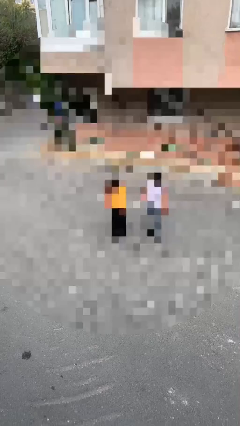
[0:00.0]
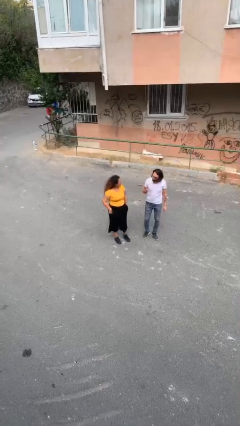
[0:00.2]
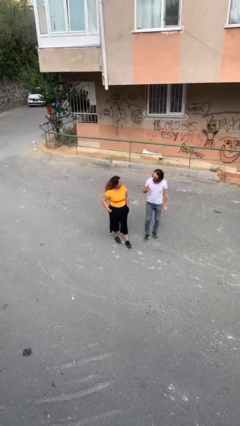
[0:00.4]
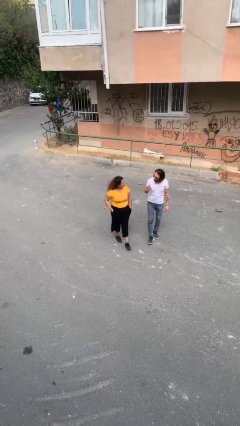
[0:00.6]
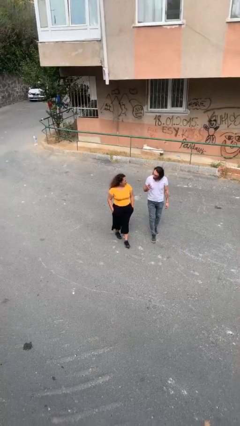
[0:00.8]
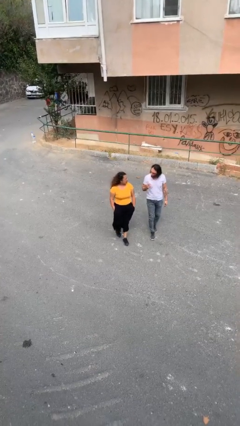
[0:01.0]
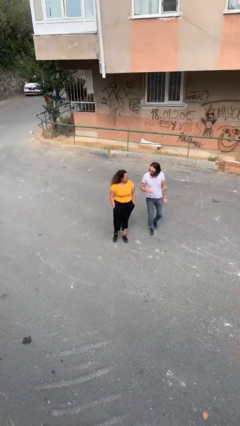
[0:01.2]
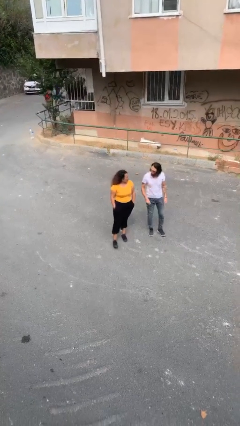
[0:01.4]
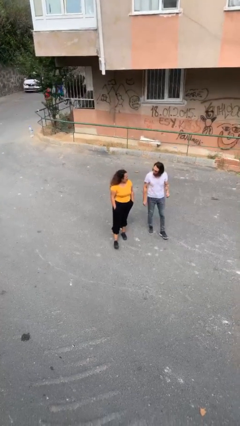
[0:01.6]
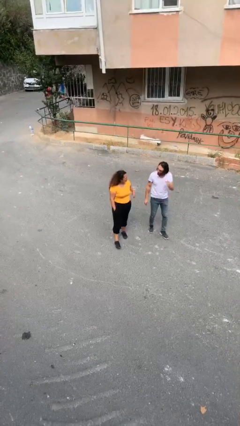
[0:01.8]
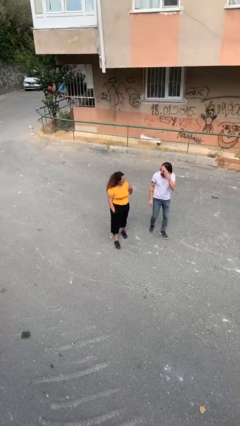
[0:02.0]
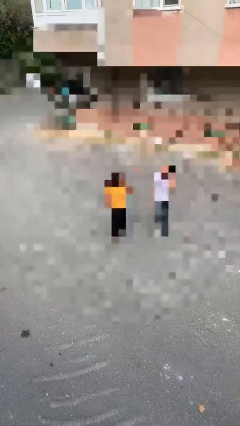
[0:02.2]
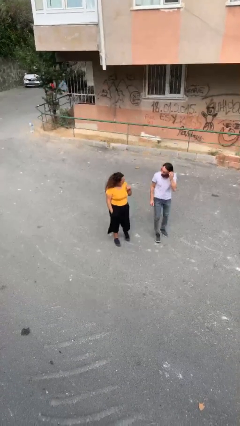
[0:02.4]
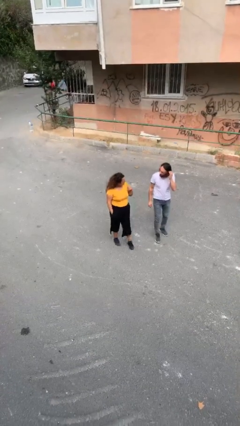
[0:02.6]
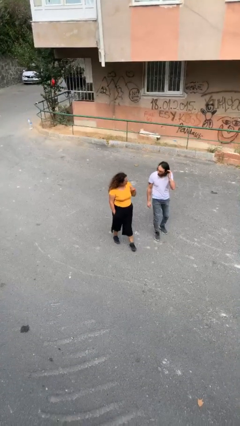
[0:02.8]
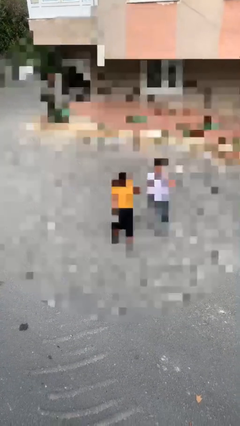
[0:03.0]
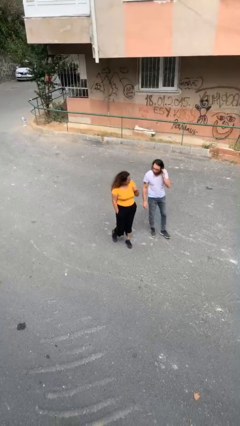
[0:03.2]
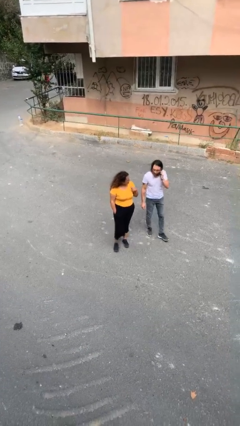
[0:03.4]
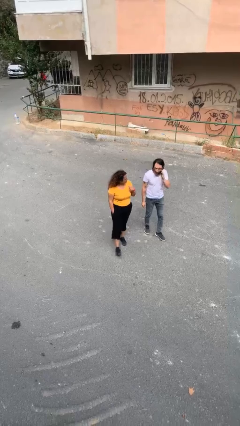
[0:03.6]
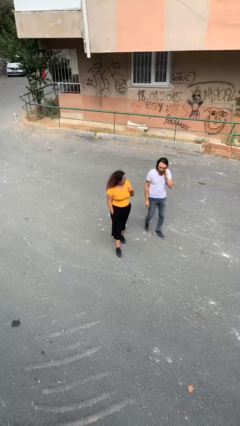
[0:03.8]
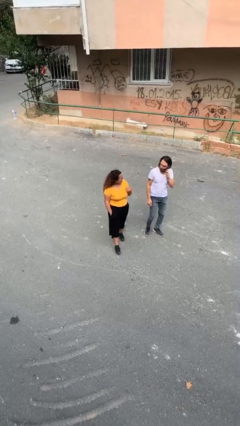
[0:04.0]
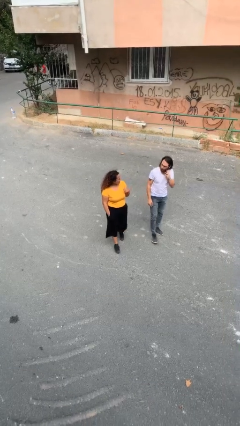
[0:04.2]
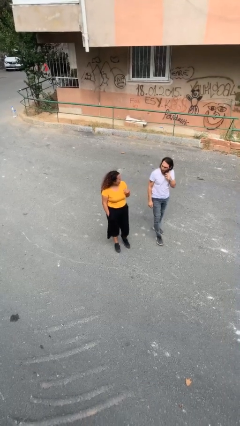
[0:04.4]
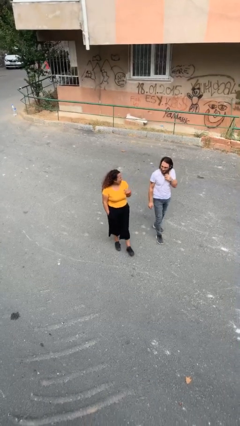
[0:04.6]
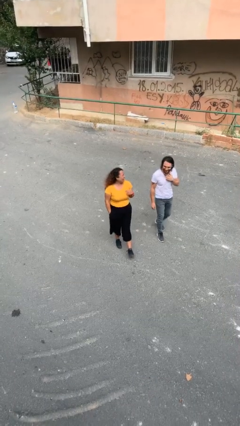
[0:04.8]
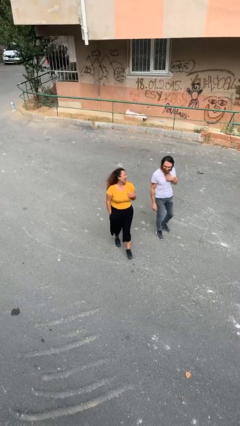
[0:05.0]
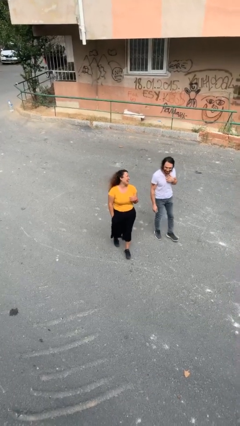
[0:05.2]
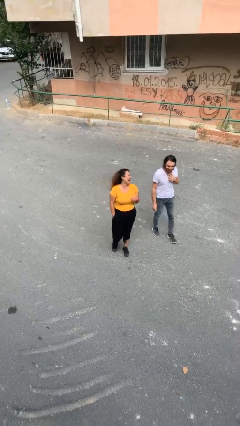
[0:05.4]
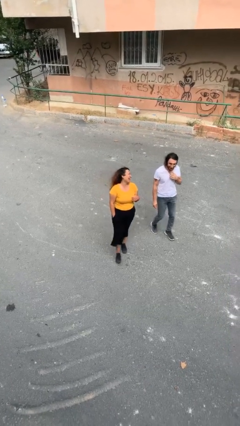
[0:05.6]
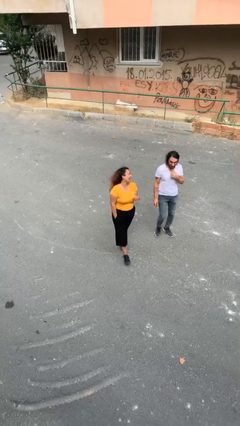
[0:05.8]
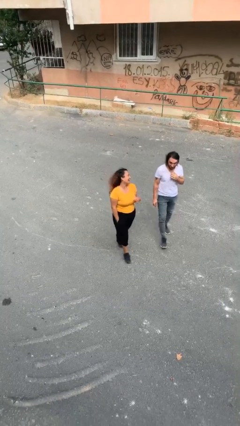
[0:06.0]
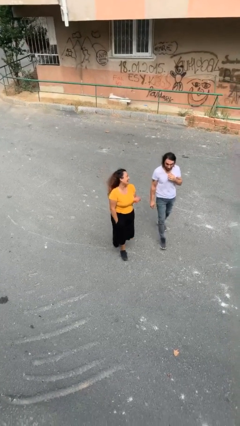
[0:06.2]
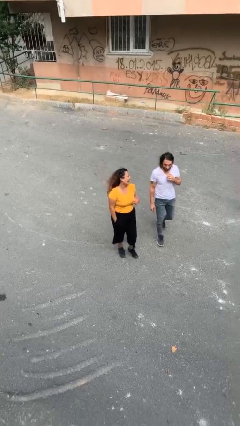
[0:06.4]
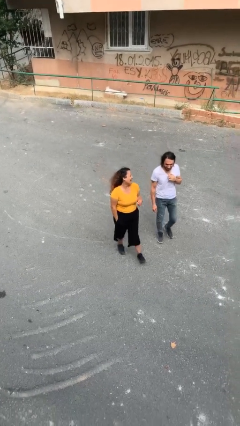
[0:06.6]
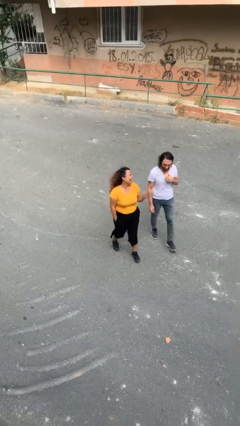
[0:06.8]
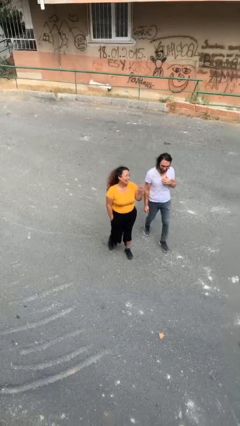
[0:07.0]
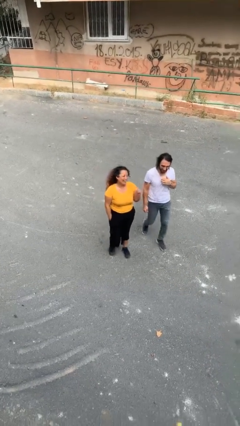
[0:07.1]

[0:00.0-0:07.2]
person talks to person

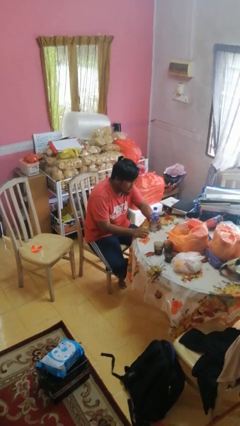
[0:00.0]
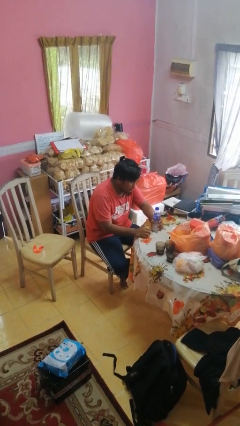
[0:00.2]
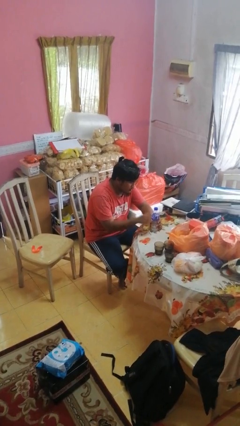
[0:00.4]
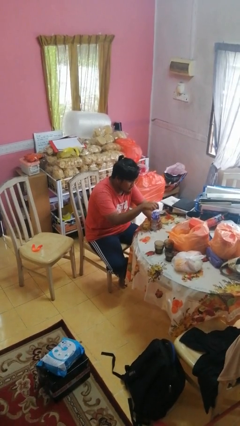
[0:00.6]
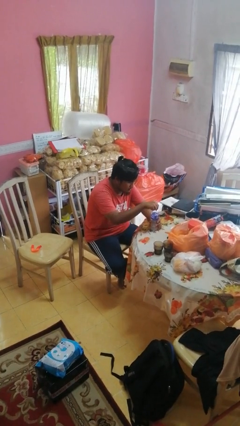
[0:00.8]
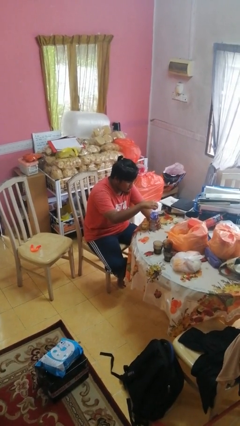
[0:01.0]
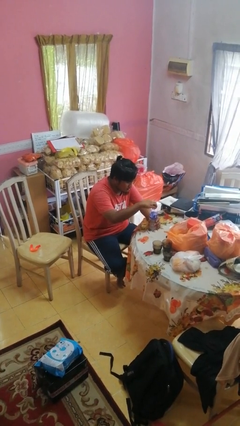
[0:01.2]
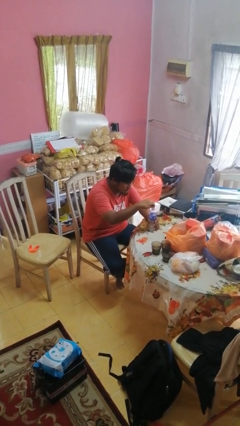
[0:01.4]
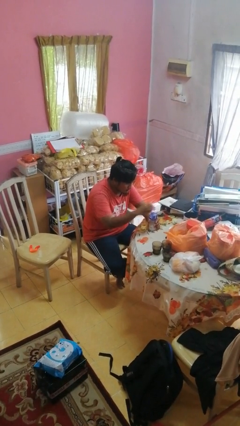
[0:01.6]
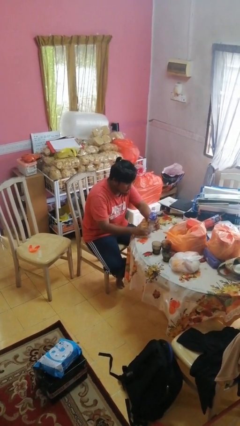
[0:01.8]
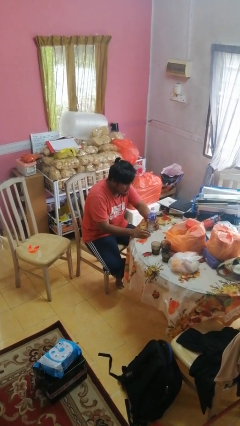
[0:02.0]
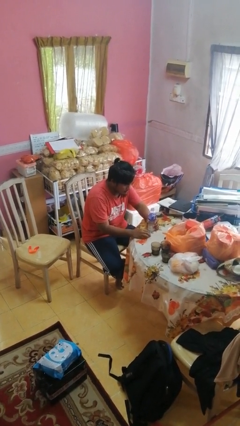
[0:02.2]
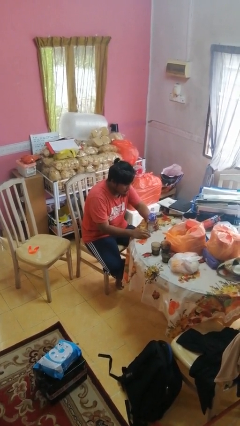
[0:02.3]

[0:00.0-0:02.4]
person unscrews lid from bottle

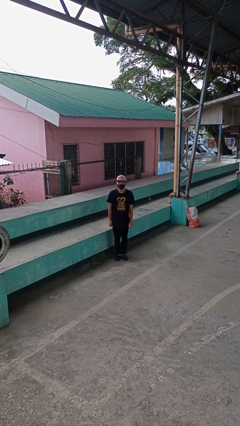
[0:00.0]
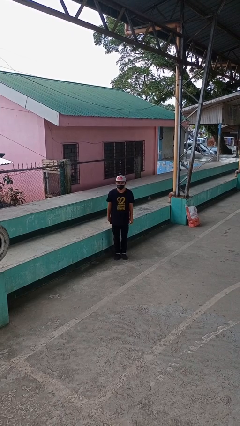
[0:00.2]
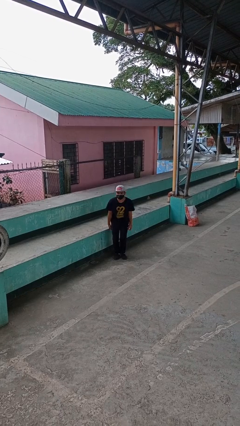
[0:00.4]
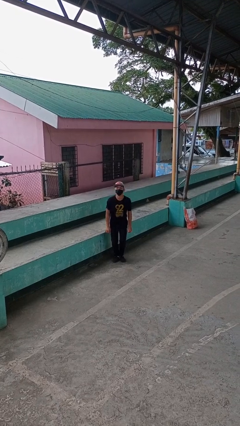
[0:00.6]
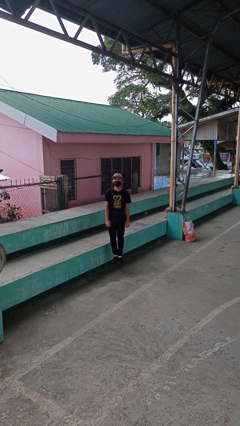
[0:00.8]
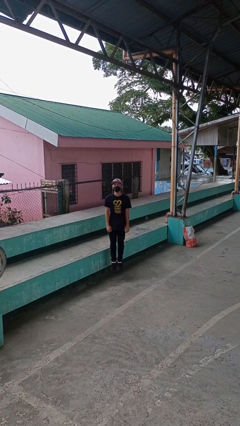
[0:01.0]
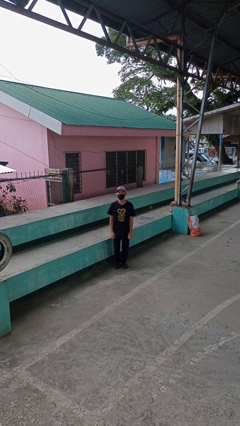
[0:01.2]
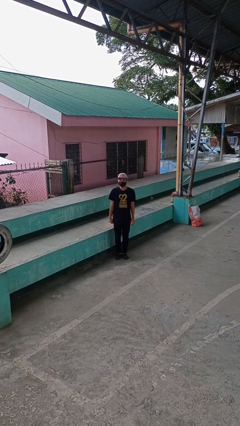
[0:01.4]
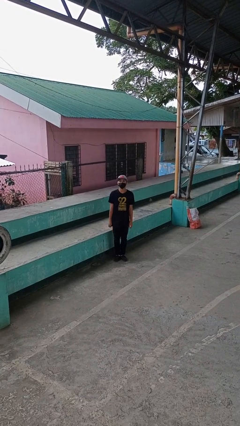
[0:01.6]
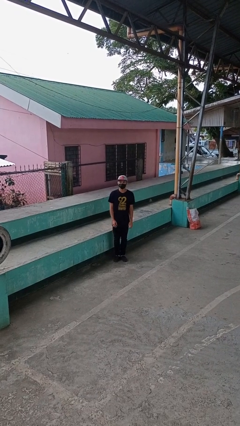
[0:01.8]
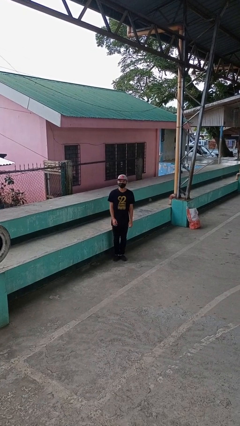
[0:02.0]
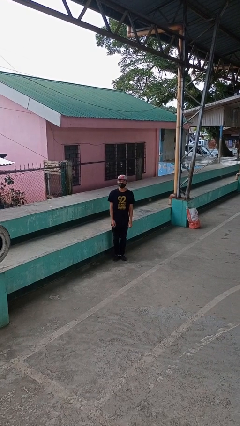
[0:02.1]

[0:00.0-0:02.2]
person jumps

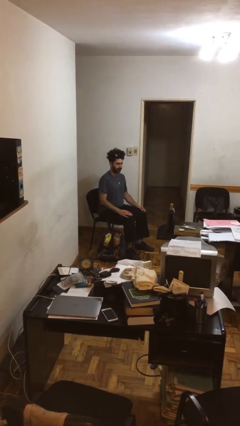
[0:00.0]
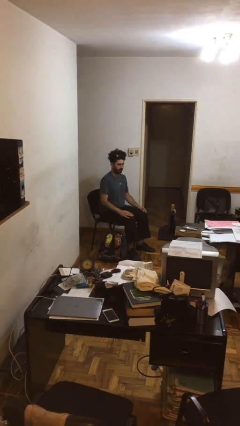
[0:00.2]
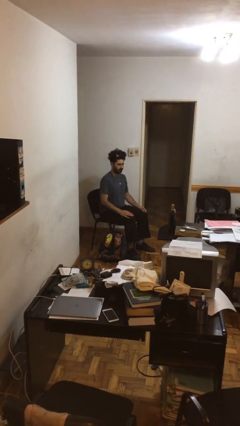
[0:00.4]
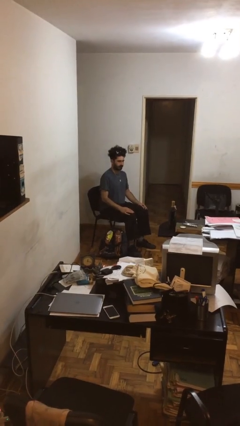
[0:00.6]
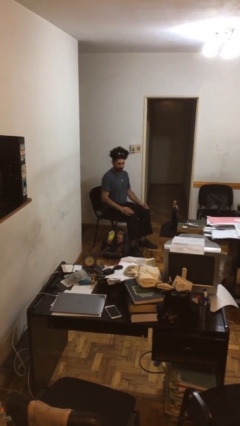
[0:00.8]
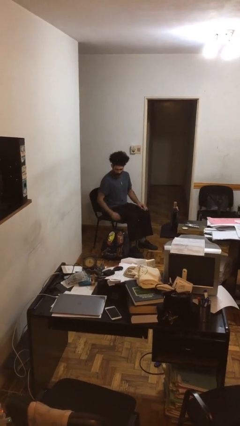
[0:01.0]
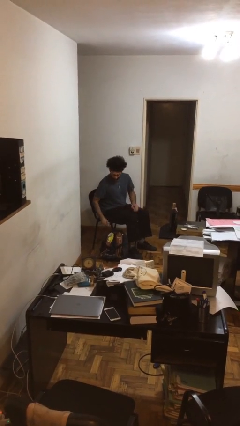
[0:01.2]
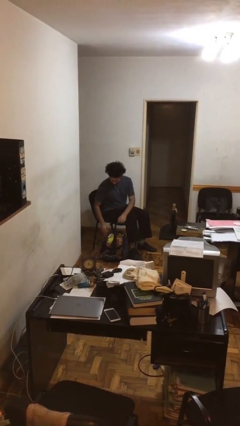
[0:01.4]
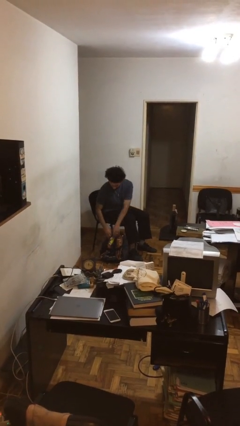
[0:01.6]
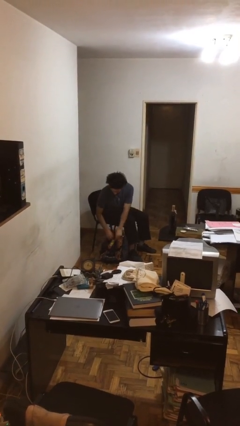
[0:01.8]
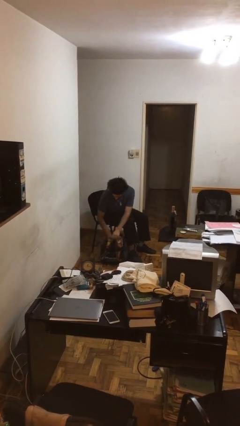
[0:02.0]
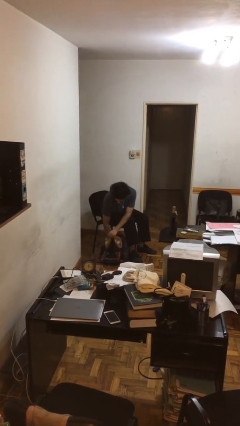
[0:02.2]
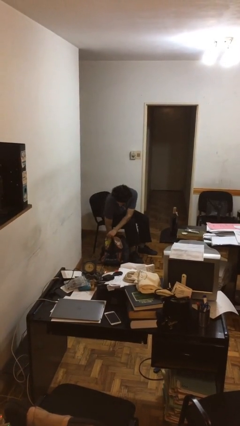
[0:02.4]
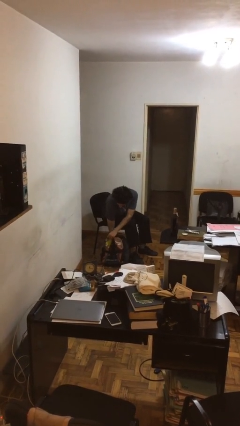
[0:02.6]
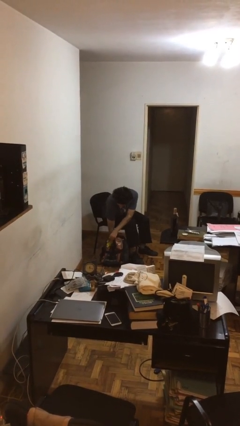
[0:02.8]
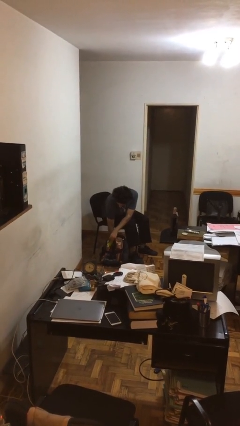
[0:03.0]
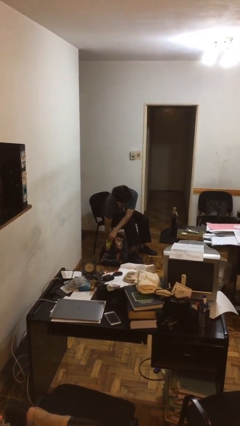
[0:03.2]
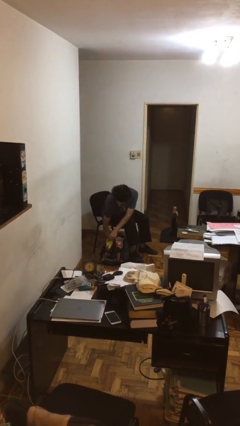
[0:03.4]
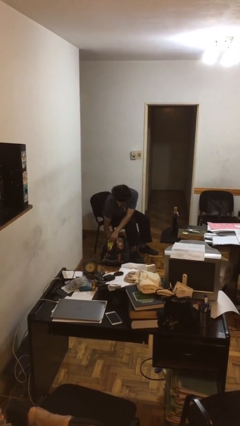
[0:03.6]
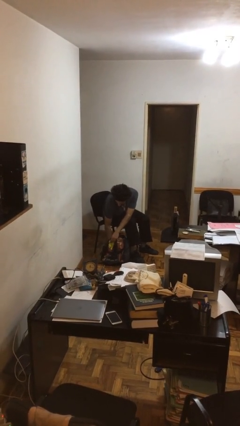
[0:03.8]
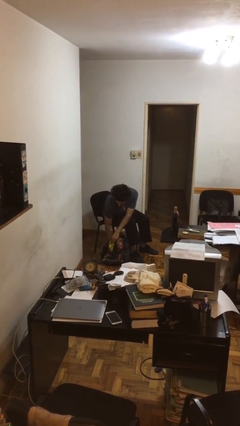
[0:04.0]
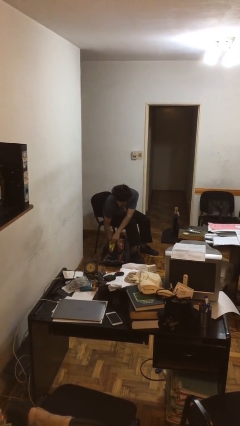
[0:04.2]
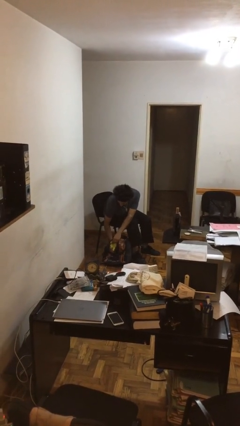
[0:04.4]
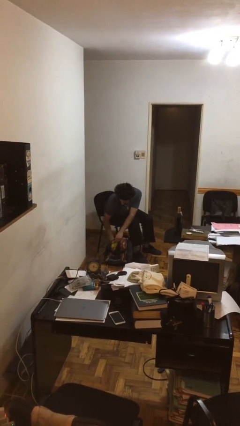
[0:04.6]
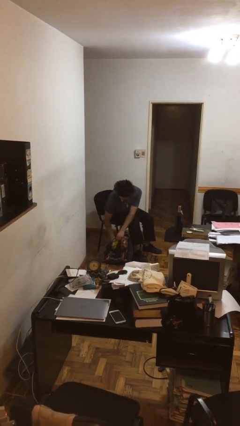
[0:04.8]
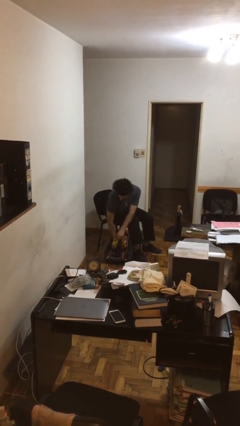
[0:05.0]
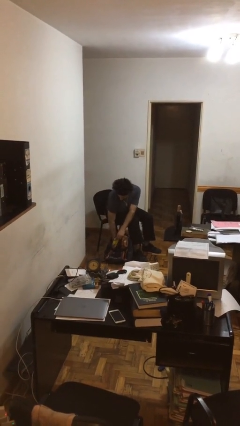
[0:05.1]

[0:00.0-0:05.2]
person searches in backpack

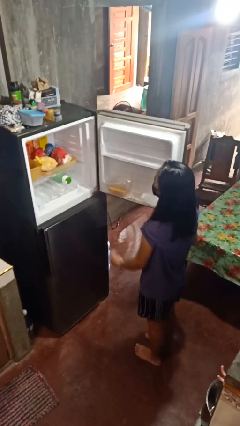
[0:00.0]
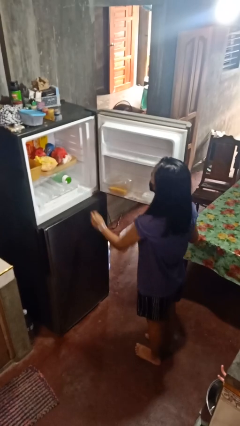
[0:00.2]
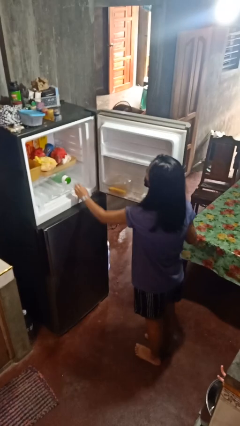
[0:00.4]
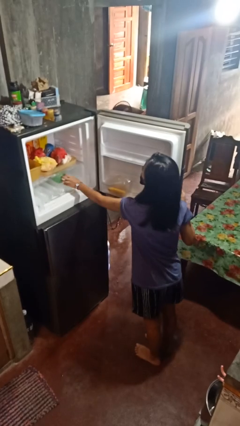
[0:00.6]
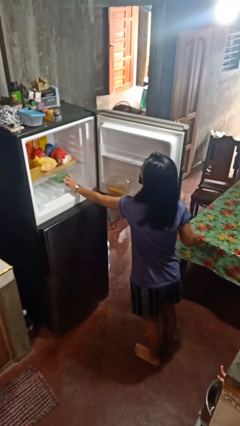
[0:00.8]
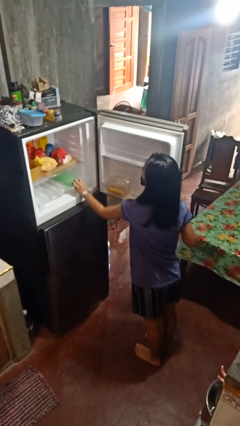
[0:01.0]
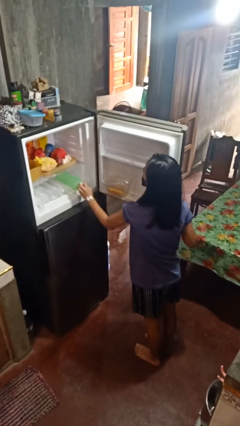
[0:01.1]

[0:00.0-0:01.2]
person takes object from refrigerator
